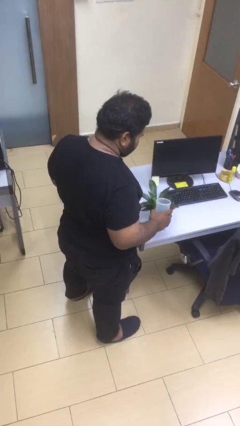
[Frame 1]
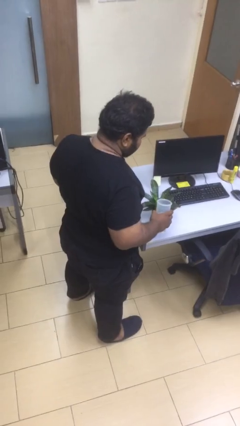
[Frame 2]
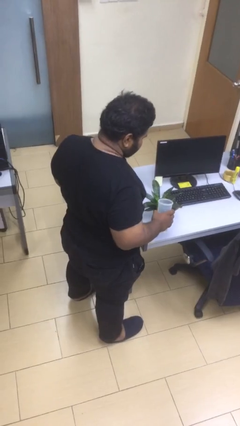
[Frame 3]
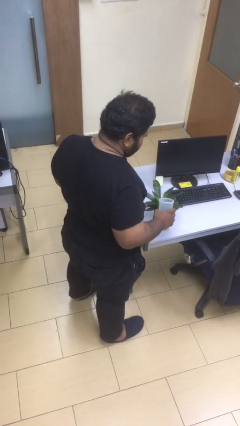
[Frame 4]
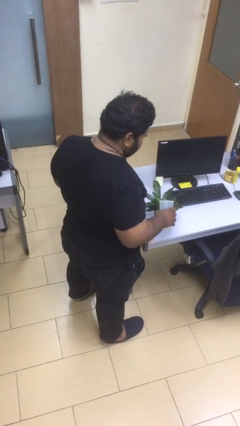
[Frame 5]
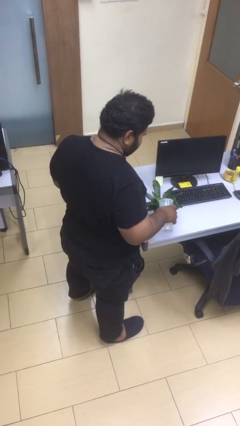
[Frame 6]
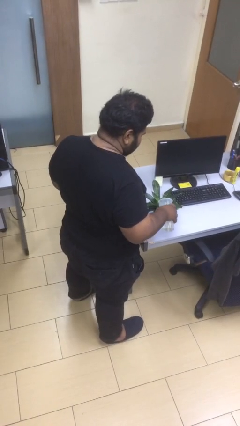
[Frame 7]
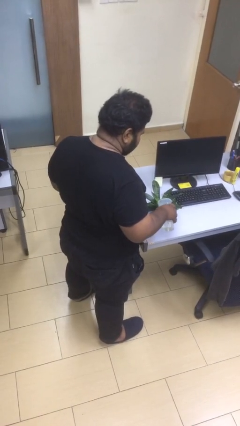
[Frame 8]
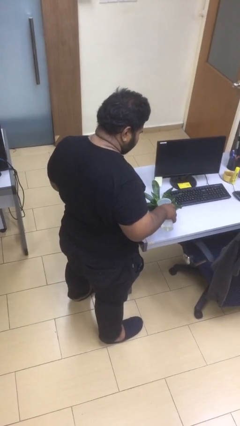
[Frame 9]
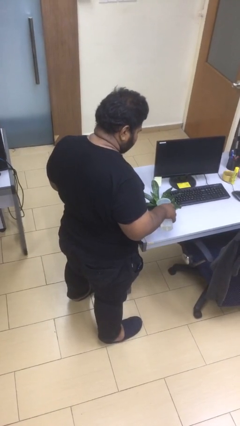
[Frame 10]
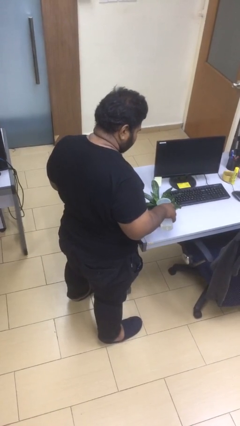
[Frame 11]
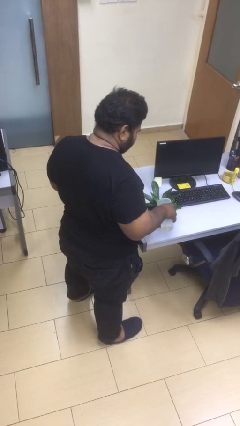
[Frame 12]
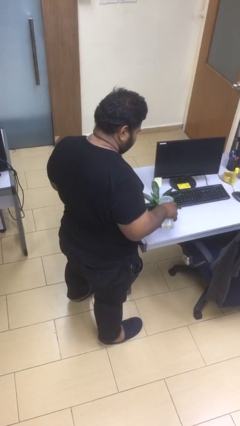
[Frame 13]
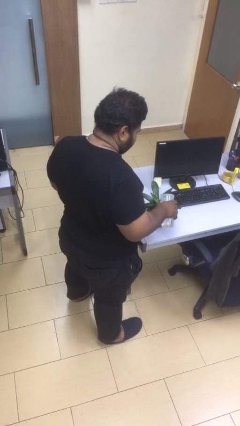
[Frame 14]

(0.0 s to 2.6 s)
person waters houseplant

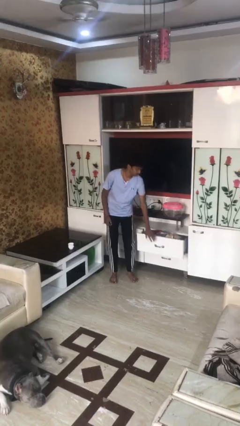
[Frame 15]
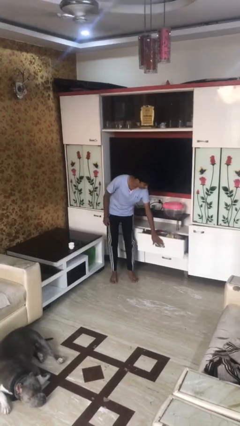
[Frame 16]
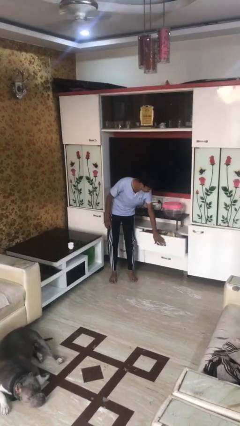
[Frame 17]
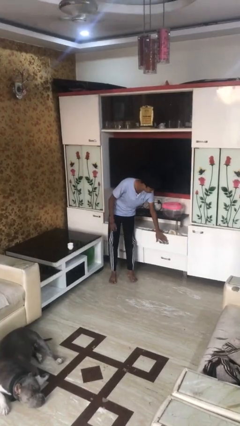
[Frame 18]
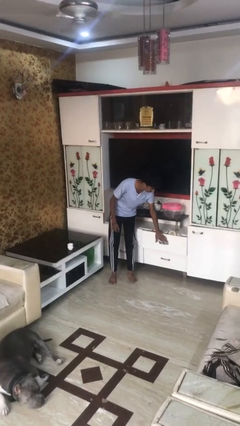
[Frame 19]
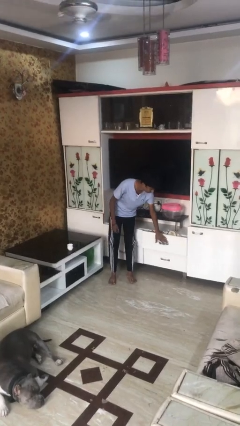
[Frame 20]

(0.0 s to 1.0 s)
person closes dresser drawer

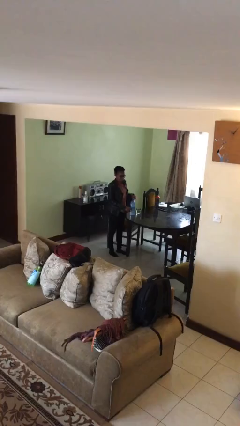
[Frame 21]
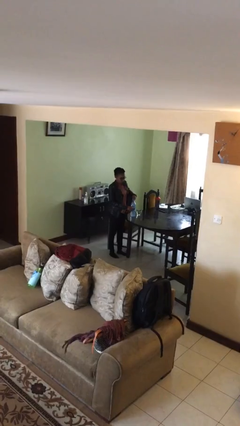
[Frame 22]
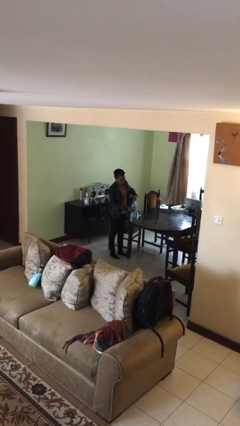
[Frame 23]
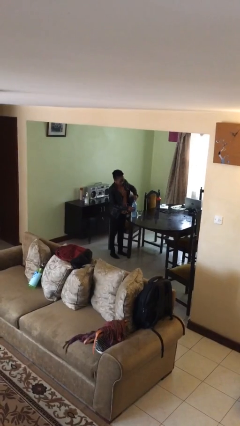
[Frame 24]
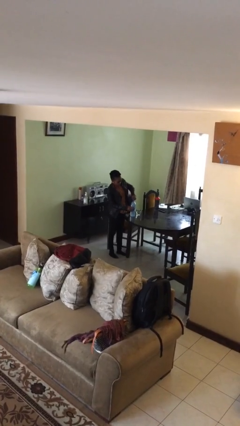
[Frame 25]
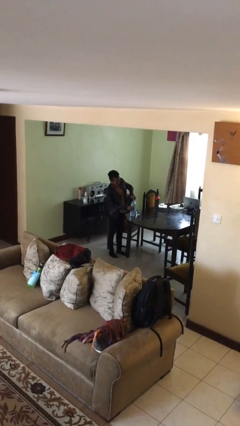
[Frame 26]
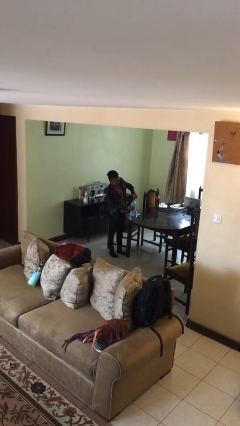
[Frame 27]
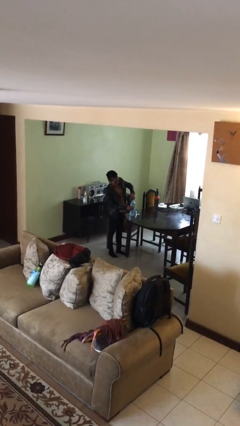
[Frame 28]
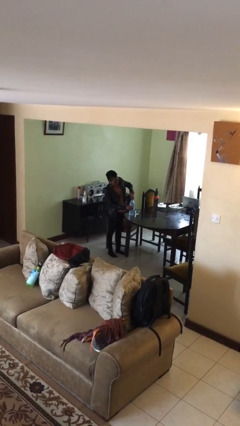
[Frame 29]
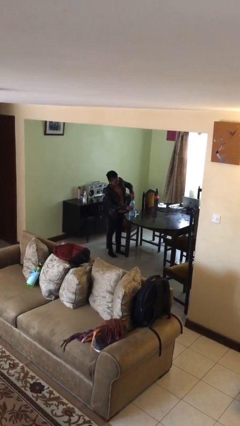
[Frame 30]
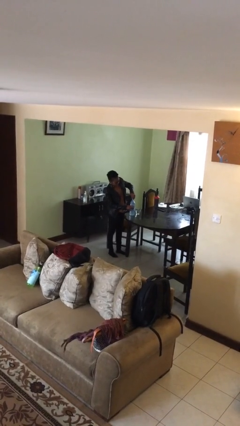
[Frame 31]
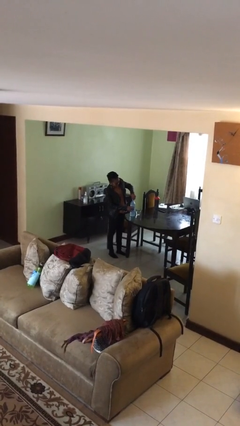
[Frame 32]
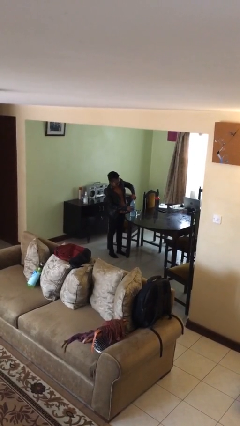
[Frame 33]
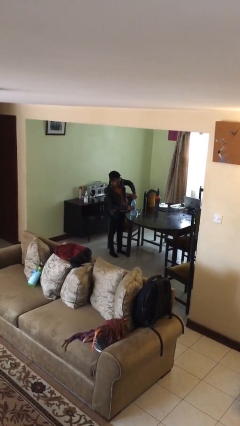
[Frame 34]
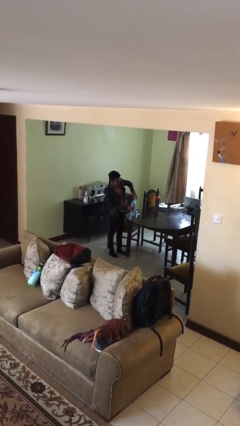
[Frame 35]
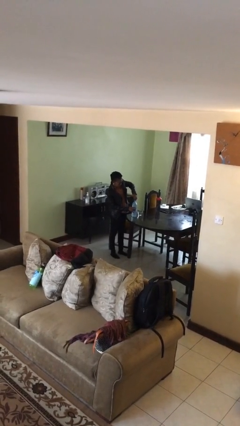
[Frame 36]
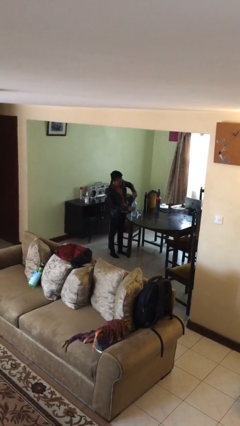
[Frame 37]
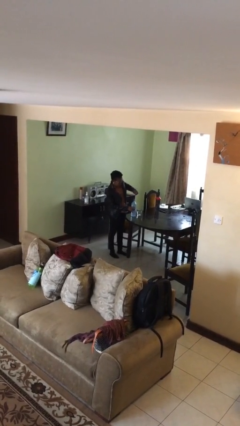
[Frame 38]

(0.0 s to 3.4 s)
person unscrews lid from bottle

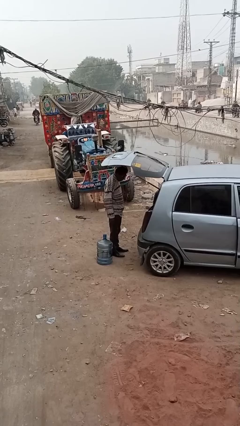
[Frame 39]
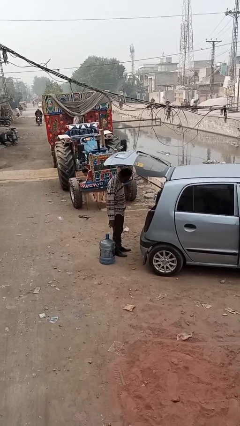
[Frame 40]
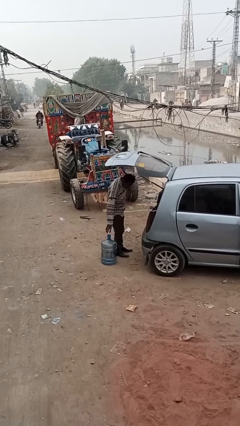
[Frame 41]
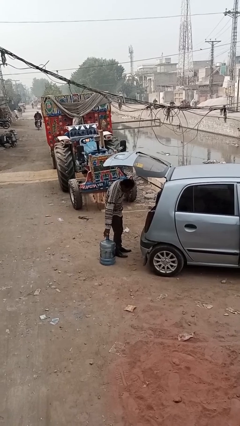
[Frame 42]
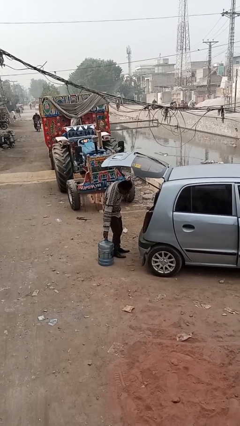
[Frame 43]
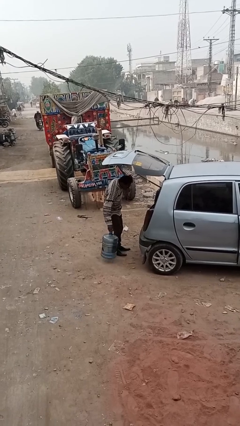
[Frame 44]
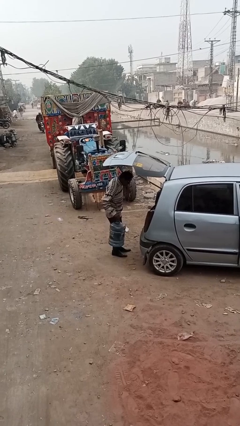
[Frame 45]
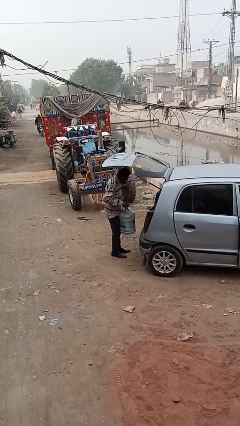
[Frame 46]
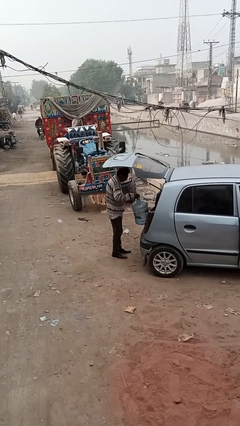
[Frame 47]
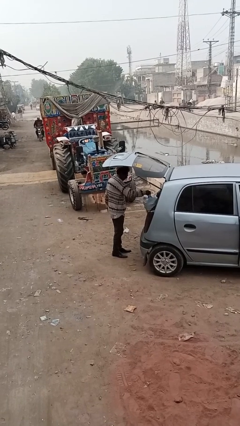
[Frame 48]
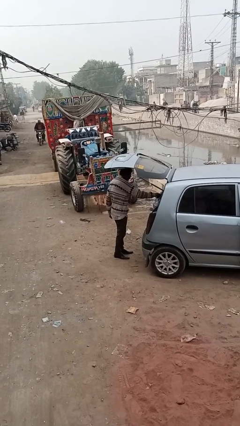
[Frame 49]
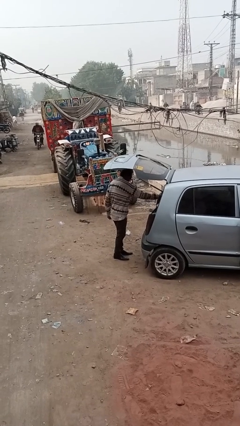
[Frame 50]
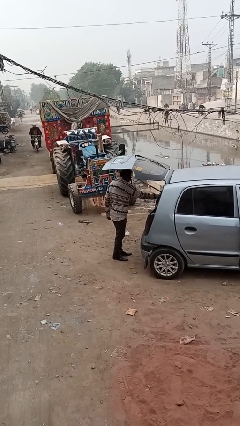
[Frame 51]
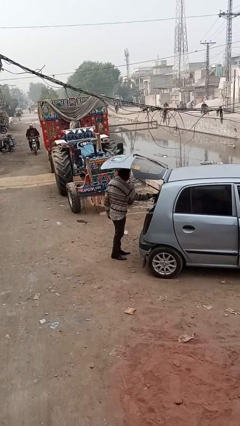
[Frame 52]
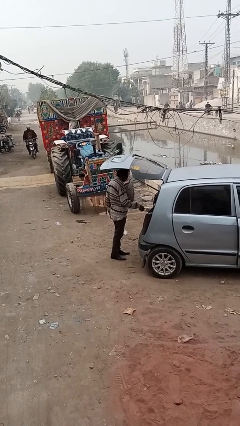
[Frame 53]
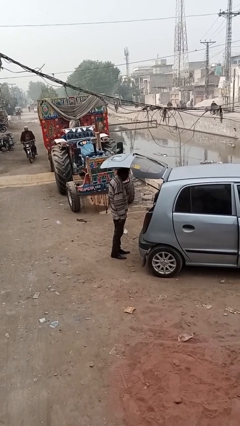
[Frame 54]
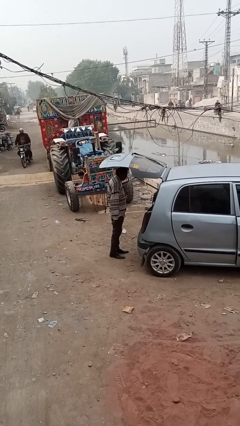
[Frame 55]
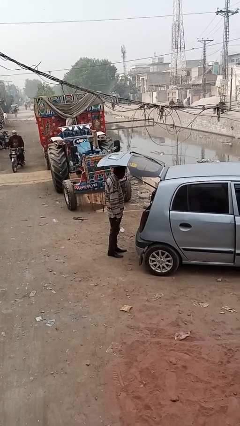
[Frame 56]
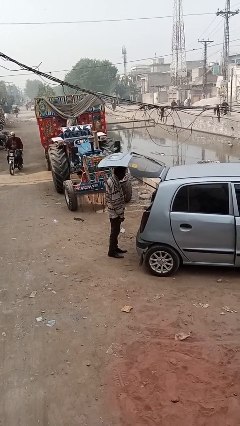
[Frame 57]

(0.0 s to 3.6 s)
person loads car

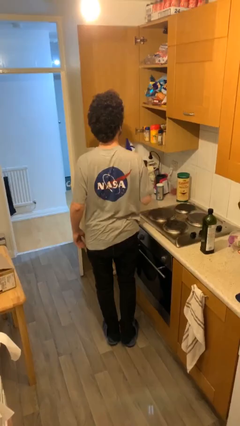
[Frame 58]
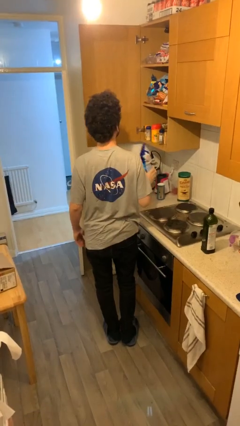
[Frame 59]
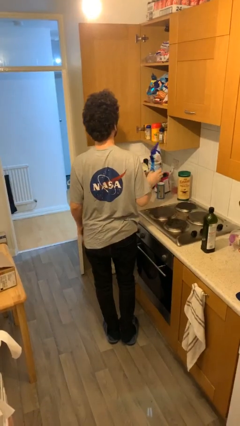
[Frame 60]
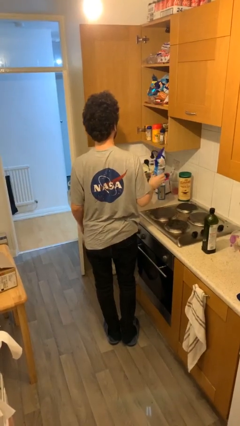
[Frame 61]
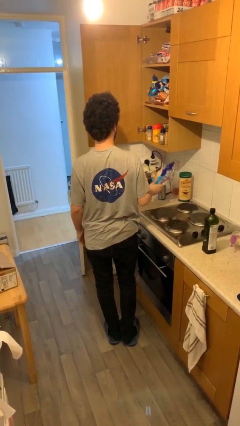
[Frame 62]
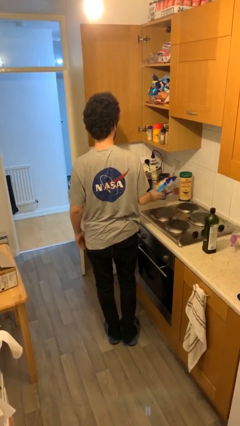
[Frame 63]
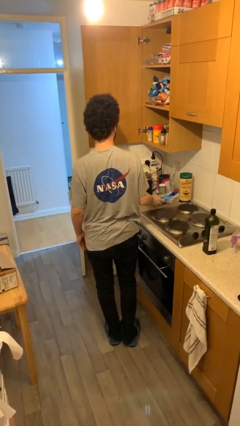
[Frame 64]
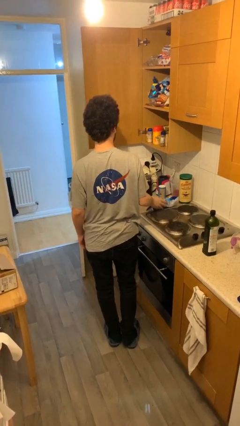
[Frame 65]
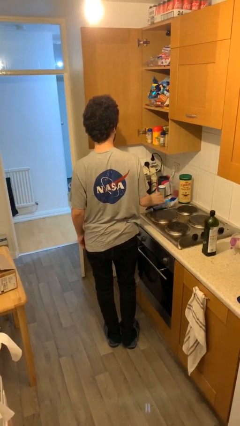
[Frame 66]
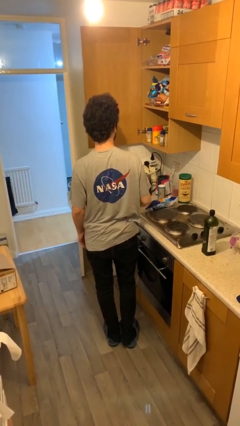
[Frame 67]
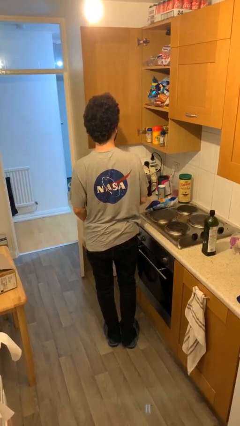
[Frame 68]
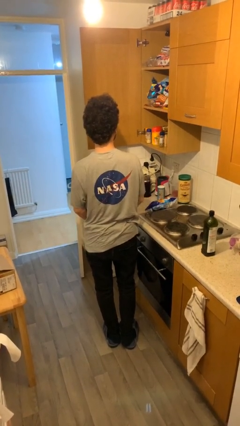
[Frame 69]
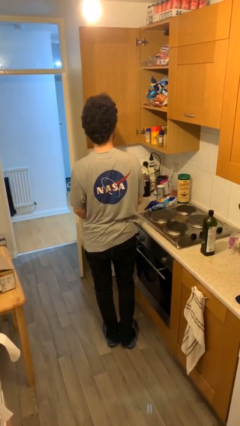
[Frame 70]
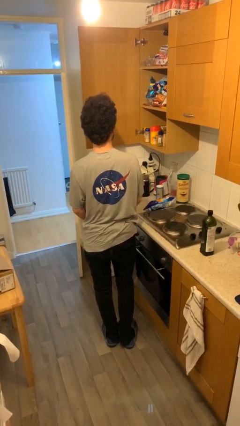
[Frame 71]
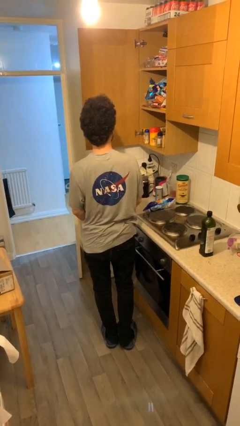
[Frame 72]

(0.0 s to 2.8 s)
person puts down object on table

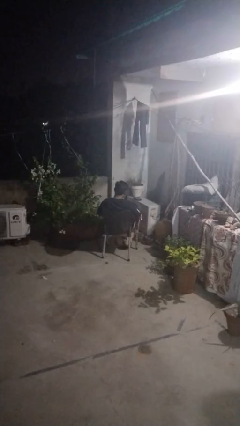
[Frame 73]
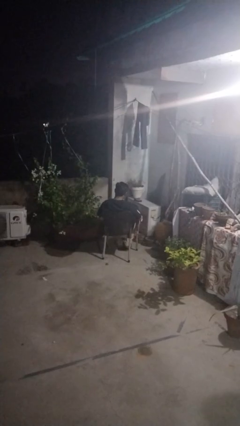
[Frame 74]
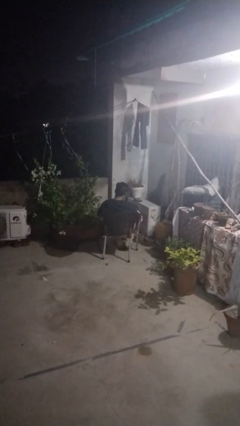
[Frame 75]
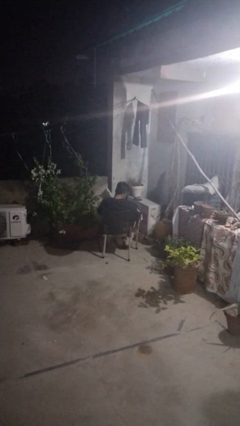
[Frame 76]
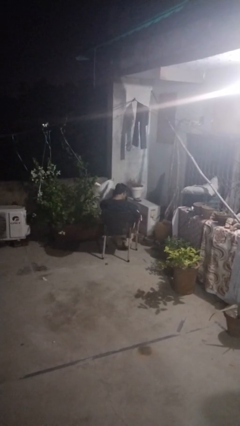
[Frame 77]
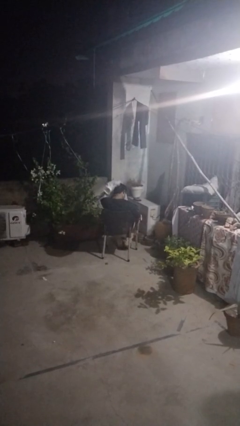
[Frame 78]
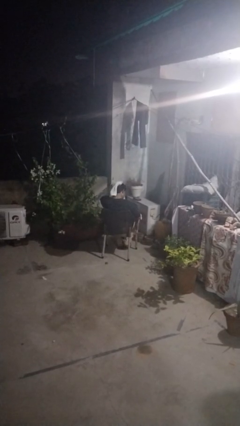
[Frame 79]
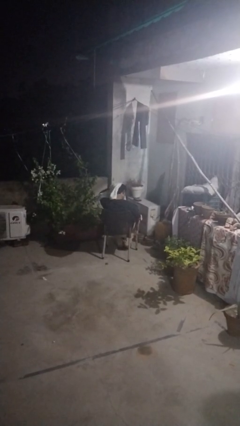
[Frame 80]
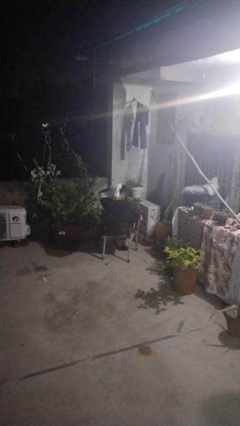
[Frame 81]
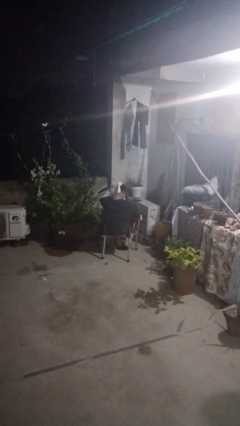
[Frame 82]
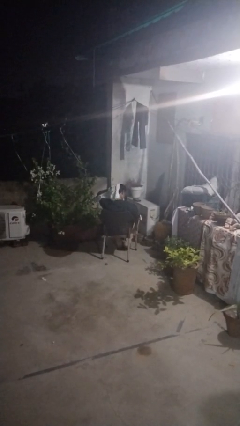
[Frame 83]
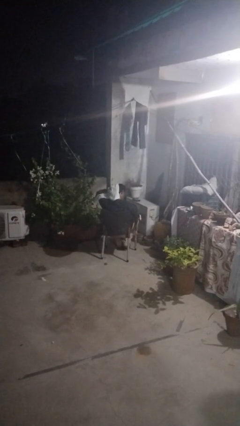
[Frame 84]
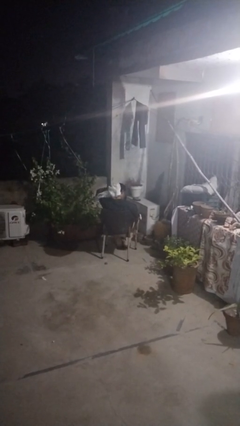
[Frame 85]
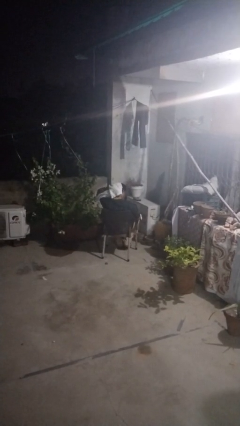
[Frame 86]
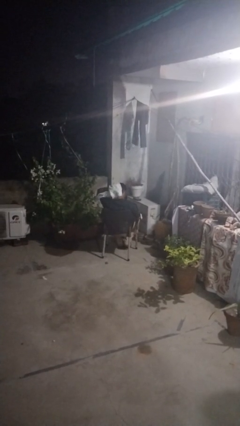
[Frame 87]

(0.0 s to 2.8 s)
person dries hair with towel

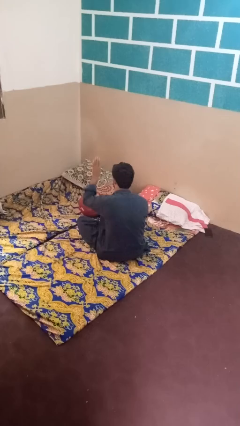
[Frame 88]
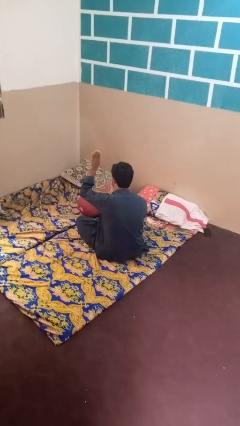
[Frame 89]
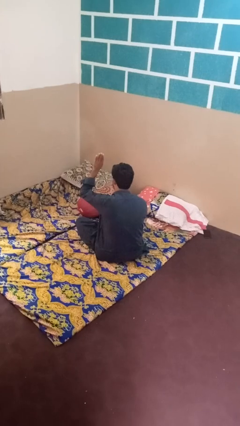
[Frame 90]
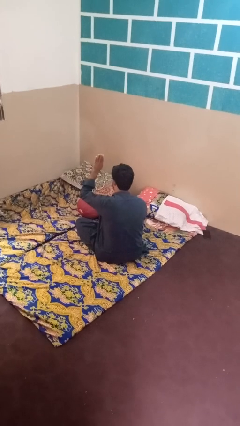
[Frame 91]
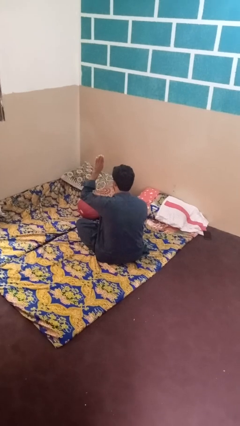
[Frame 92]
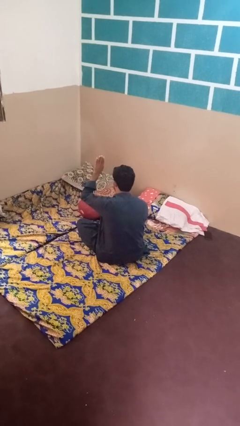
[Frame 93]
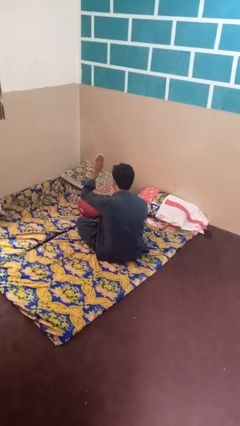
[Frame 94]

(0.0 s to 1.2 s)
person gestures number four
